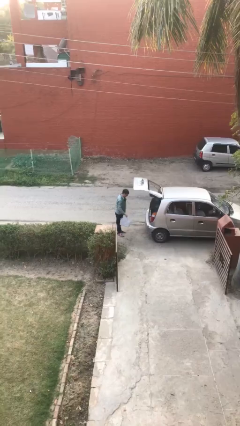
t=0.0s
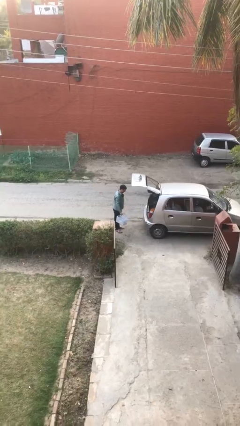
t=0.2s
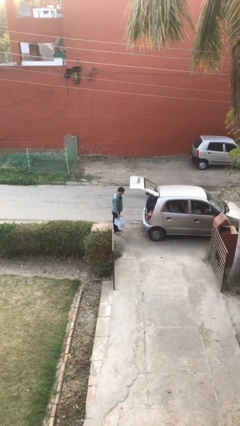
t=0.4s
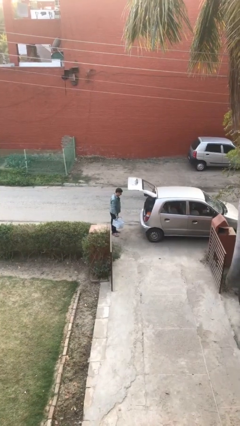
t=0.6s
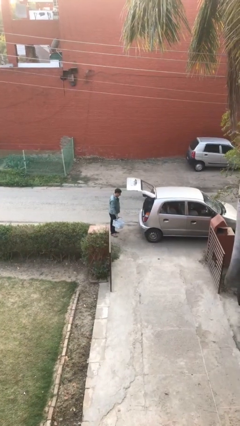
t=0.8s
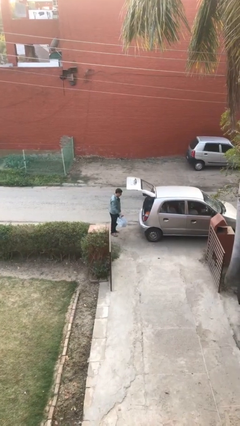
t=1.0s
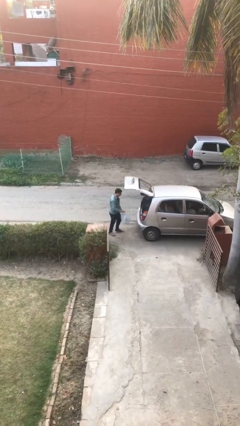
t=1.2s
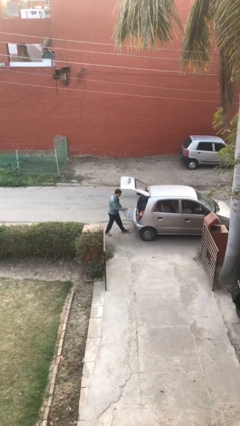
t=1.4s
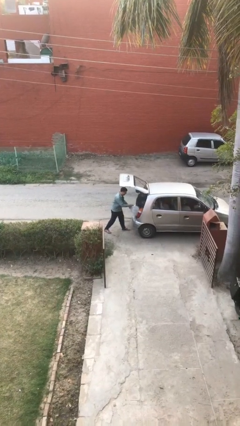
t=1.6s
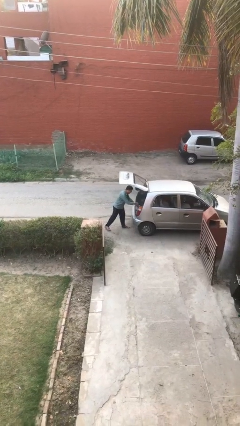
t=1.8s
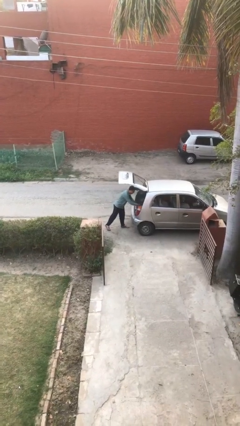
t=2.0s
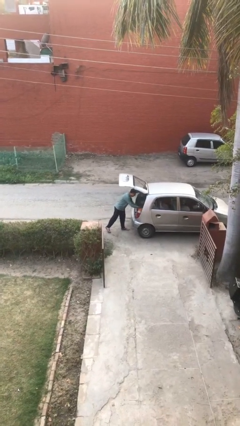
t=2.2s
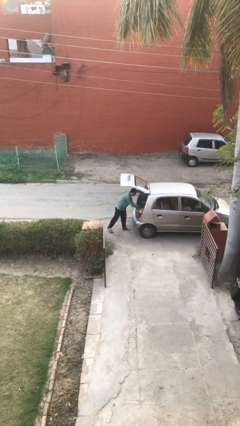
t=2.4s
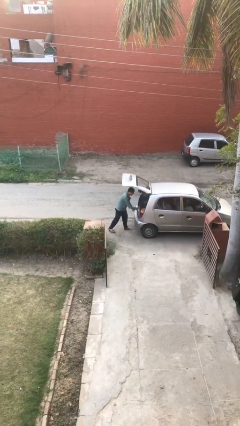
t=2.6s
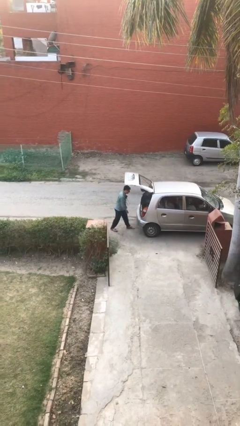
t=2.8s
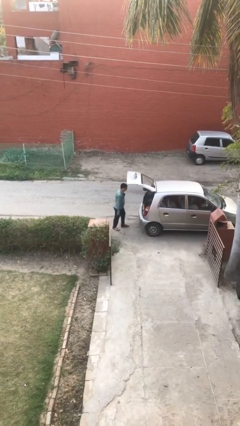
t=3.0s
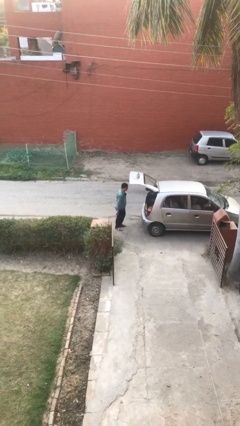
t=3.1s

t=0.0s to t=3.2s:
person loads car

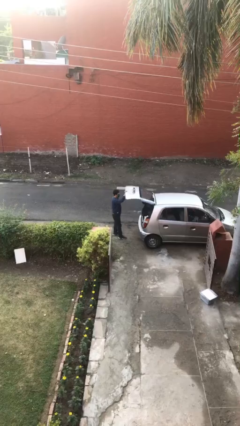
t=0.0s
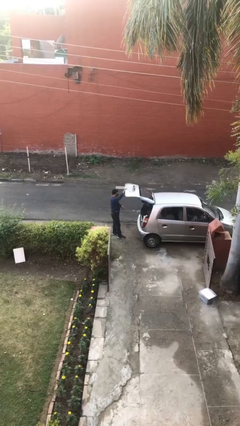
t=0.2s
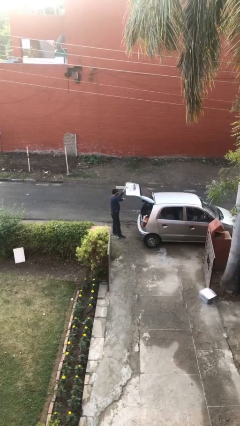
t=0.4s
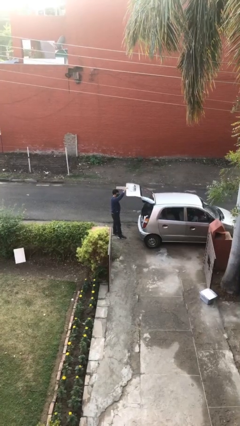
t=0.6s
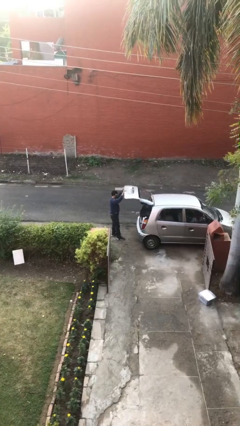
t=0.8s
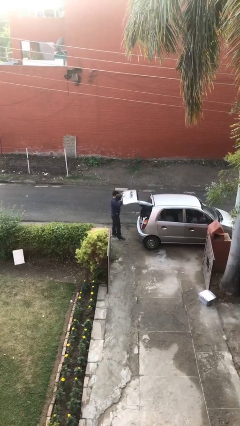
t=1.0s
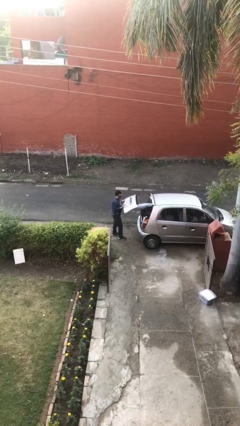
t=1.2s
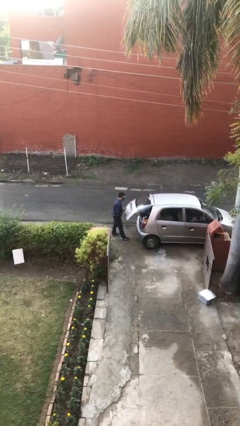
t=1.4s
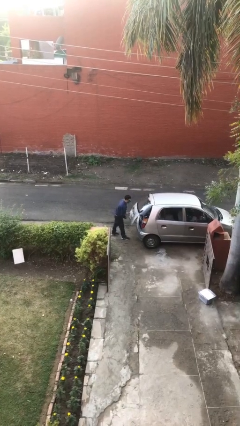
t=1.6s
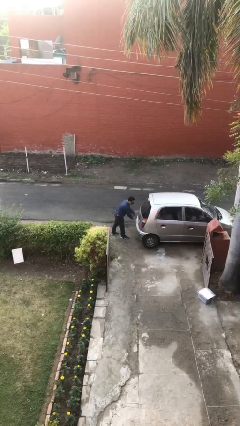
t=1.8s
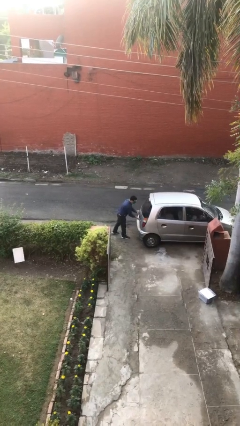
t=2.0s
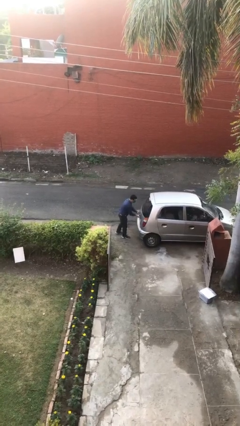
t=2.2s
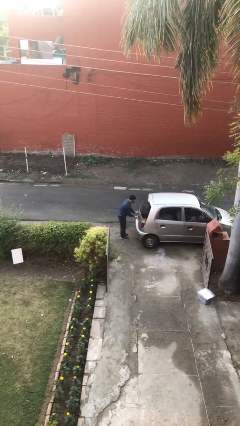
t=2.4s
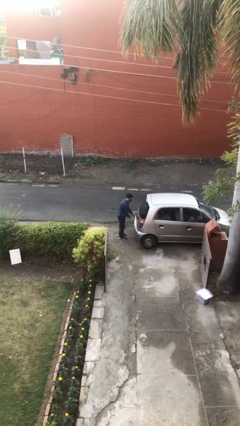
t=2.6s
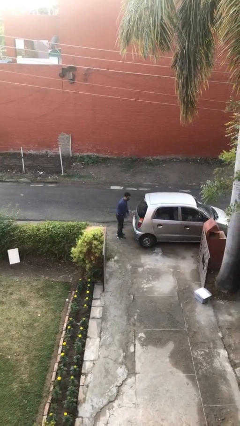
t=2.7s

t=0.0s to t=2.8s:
person closes car trunk

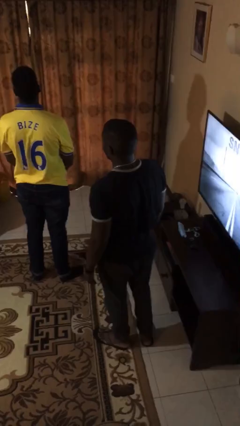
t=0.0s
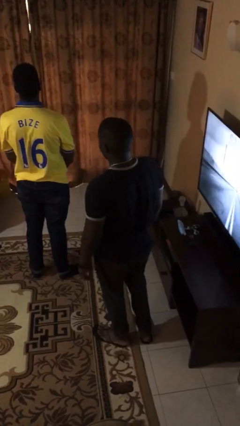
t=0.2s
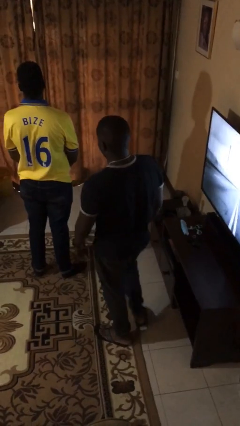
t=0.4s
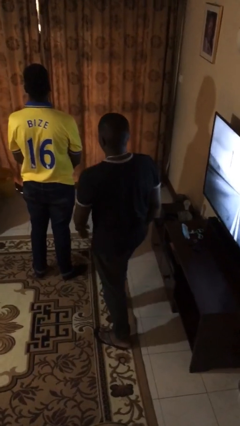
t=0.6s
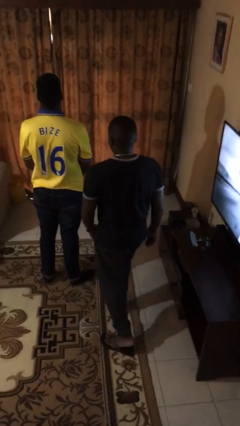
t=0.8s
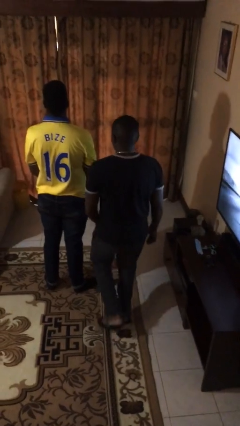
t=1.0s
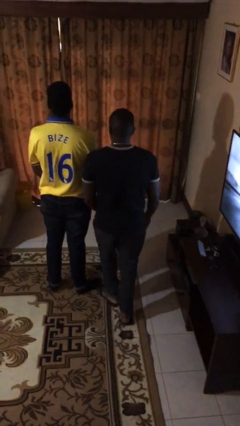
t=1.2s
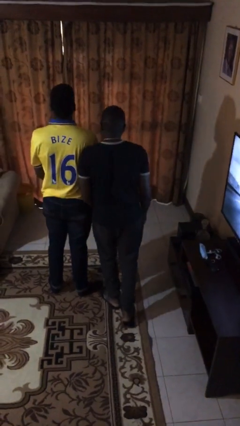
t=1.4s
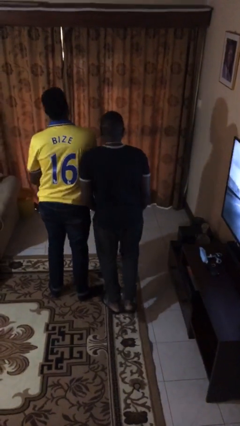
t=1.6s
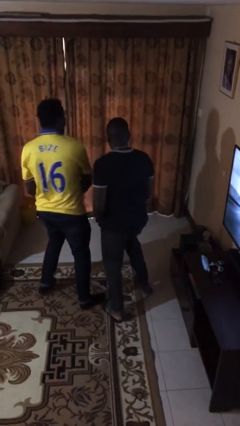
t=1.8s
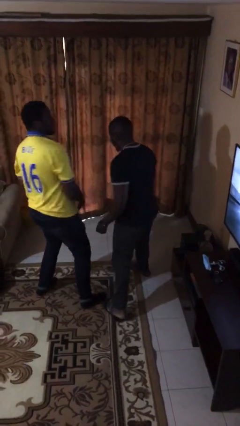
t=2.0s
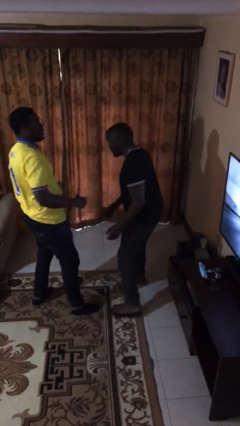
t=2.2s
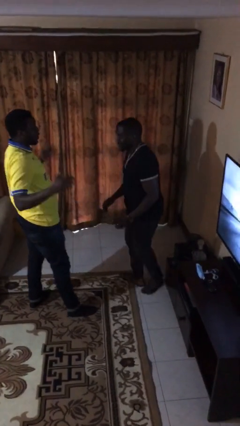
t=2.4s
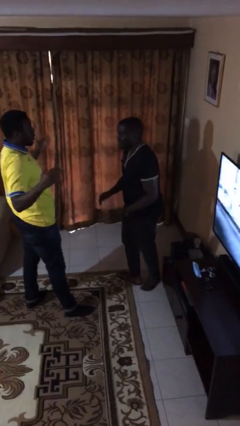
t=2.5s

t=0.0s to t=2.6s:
person bumps into person

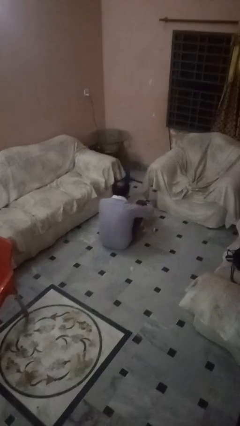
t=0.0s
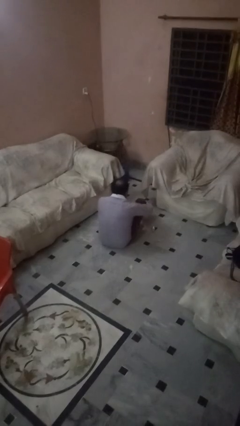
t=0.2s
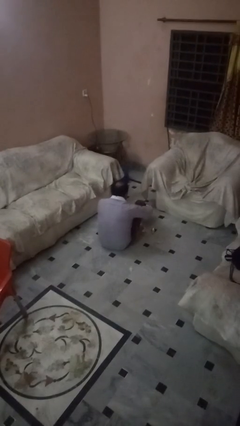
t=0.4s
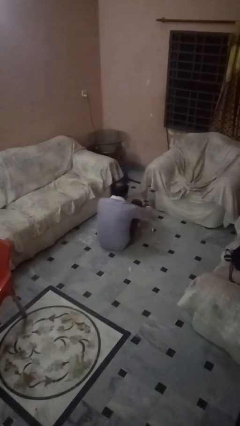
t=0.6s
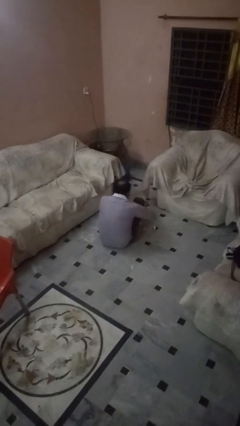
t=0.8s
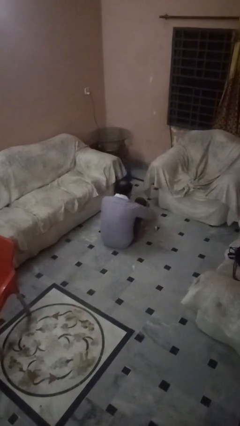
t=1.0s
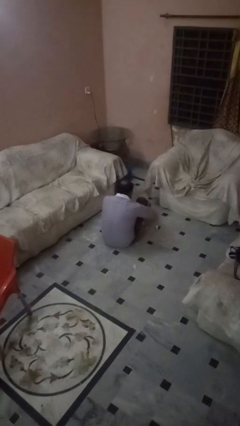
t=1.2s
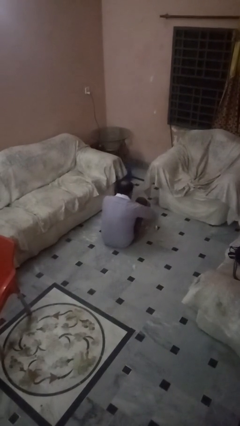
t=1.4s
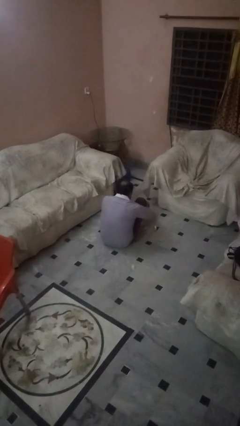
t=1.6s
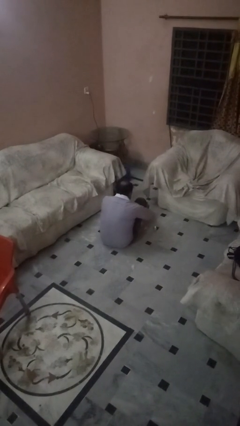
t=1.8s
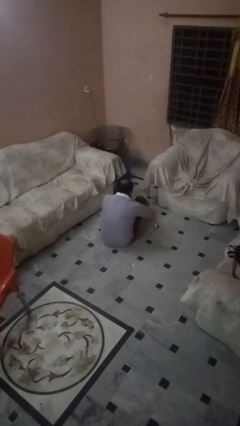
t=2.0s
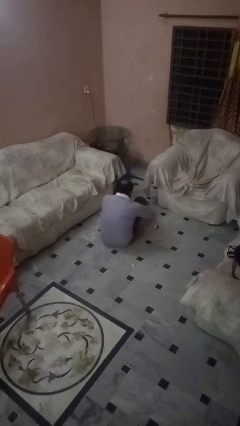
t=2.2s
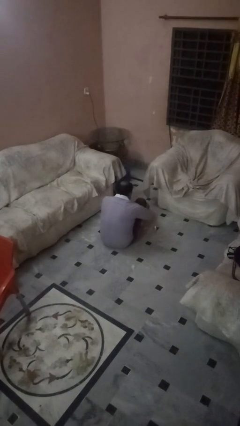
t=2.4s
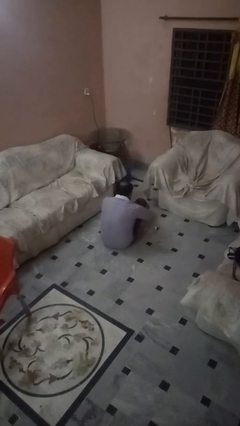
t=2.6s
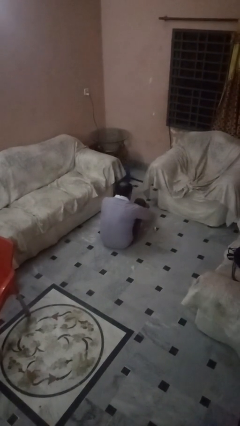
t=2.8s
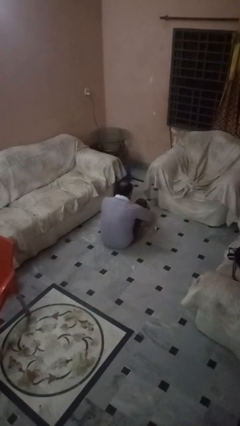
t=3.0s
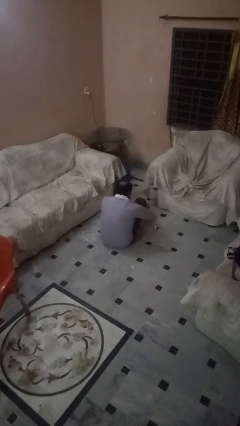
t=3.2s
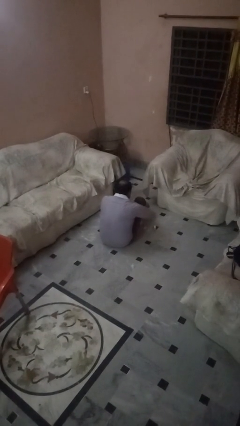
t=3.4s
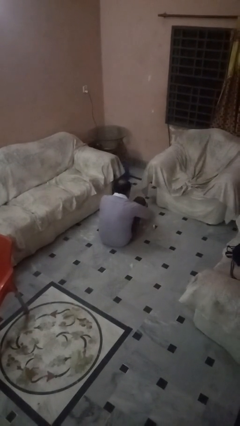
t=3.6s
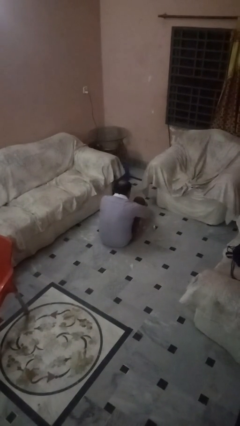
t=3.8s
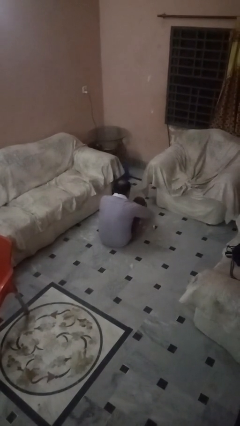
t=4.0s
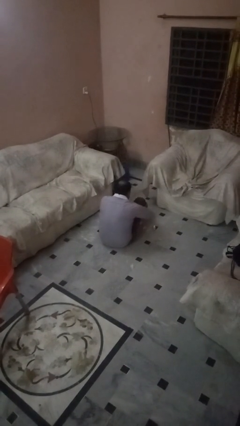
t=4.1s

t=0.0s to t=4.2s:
person rubs foot

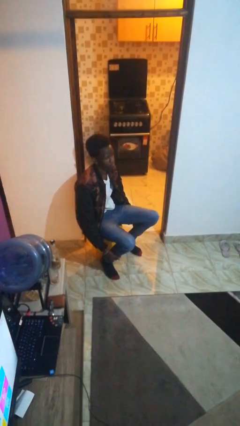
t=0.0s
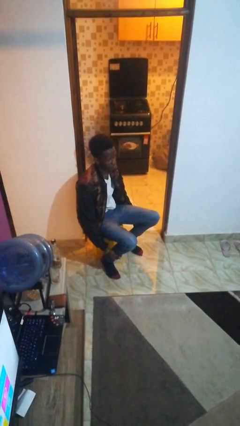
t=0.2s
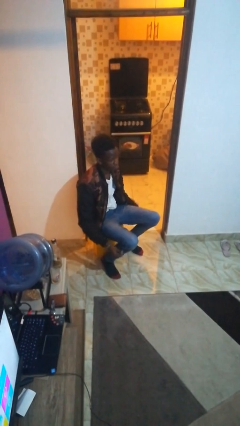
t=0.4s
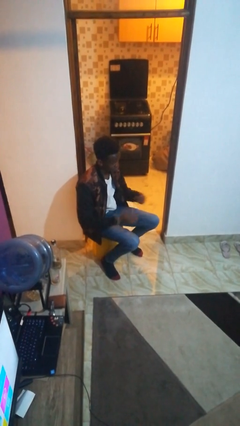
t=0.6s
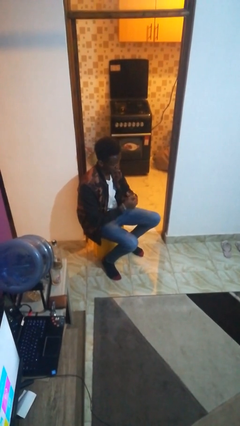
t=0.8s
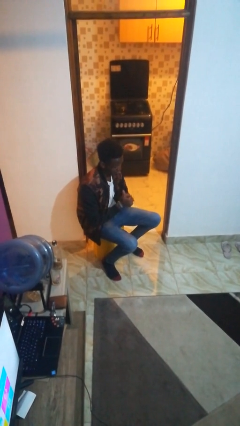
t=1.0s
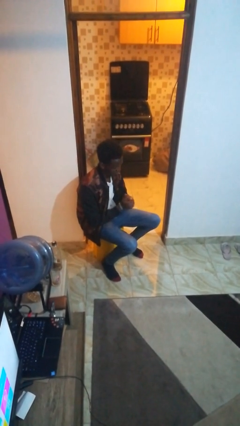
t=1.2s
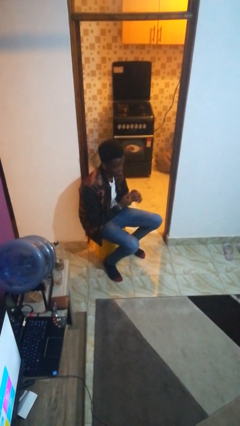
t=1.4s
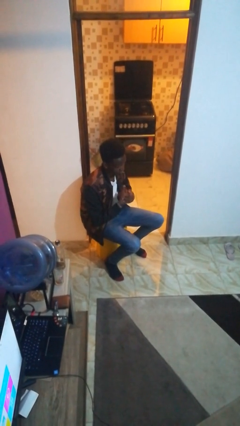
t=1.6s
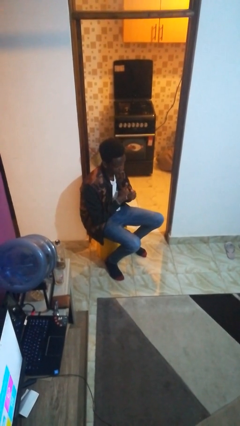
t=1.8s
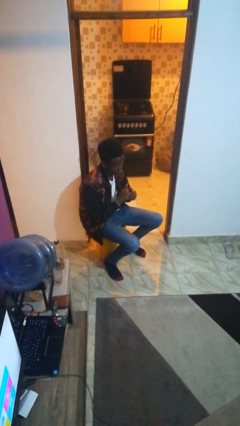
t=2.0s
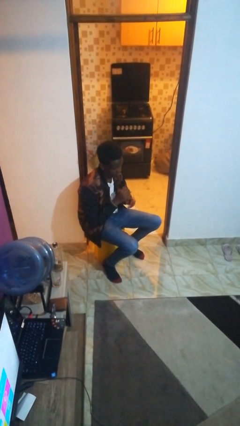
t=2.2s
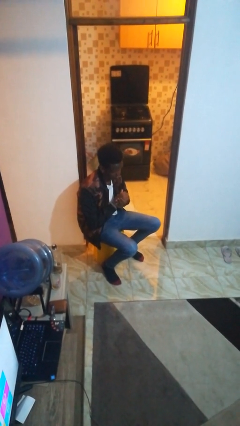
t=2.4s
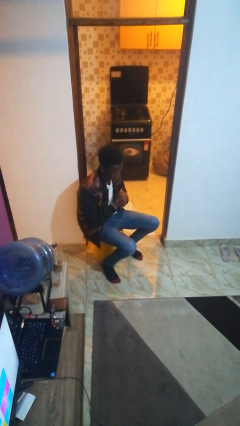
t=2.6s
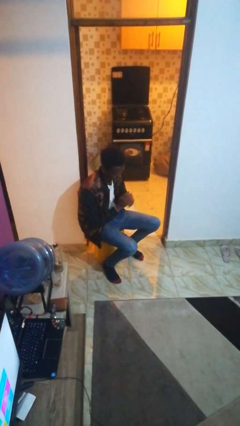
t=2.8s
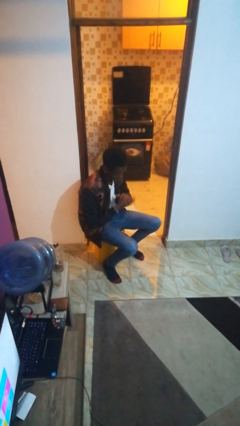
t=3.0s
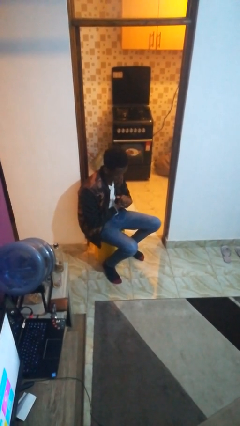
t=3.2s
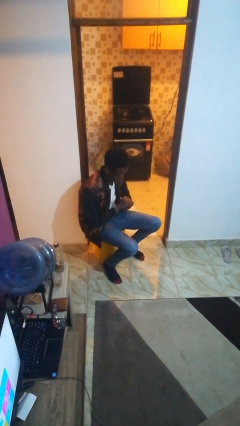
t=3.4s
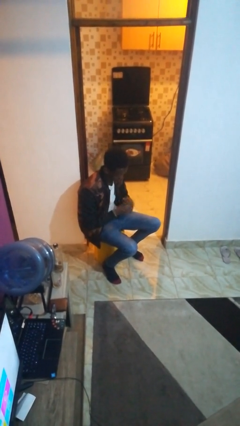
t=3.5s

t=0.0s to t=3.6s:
person cracks knuckles

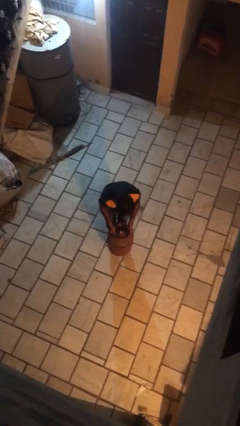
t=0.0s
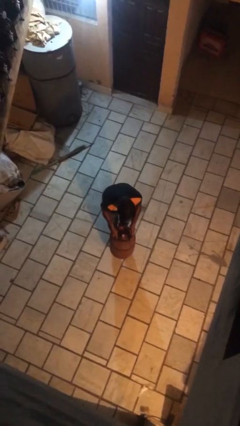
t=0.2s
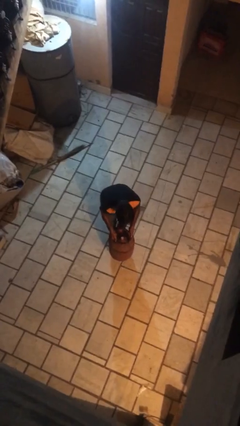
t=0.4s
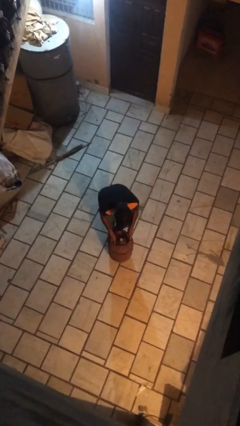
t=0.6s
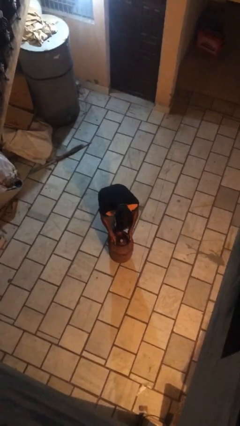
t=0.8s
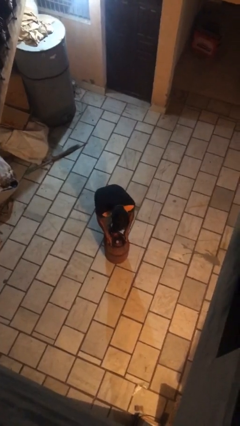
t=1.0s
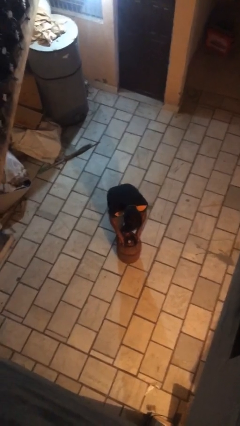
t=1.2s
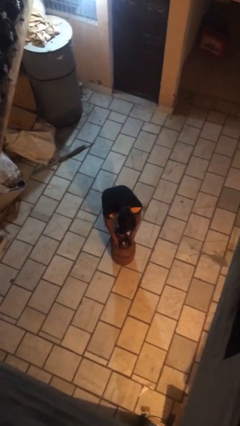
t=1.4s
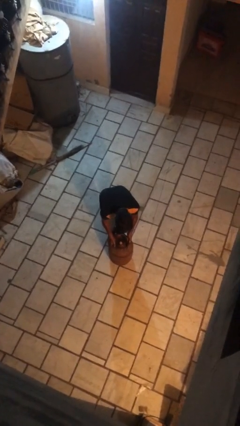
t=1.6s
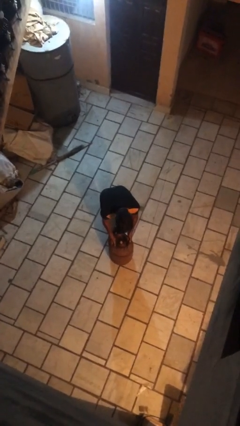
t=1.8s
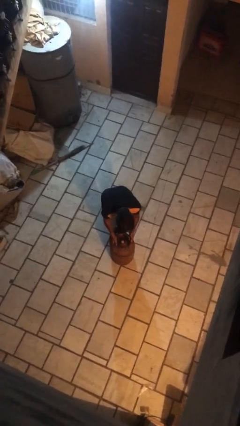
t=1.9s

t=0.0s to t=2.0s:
person puts down object on floor
